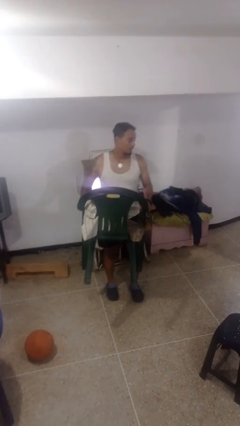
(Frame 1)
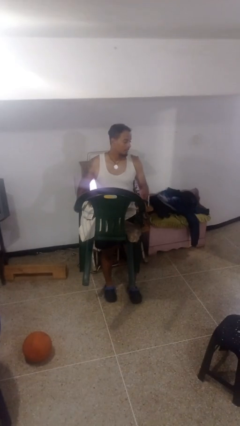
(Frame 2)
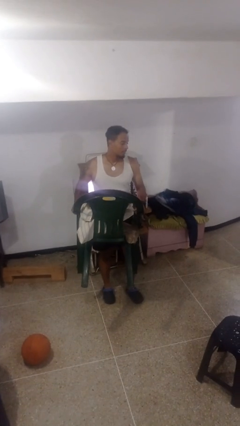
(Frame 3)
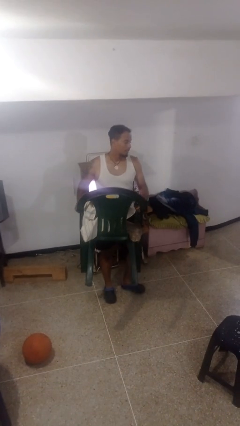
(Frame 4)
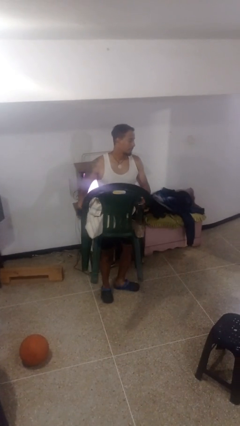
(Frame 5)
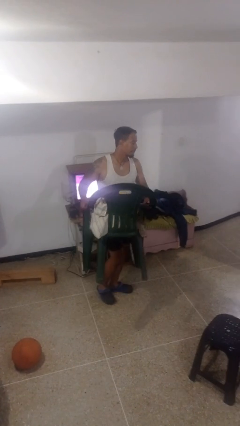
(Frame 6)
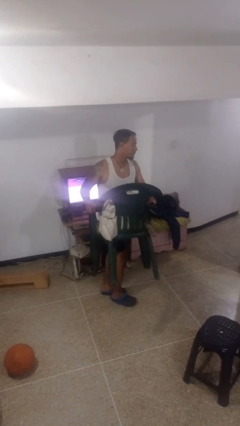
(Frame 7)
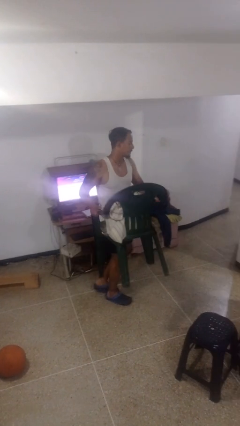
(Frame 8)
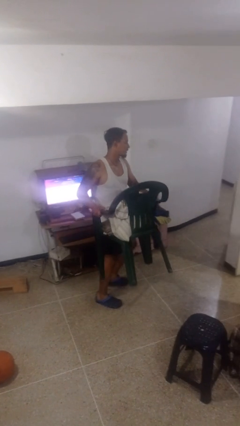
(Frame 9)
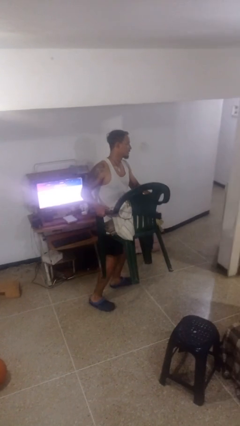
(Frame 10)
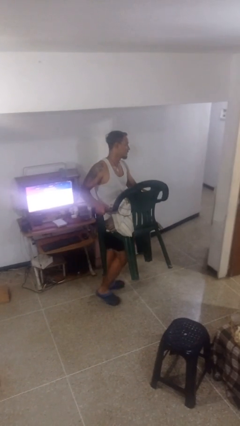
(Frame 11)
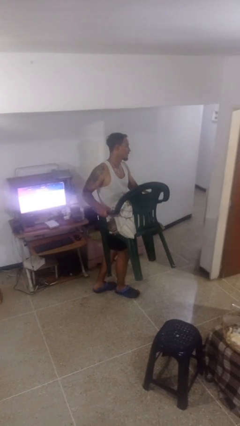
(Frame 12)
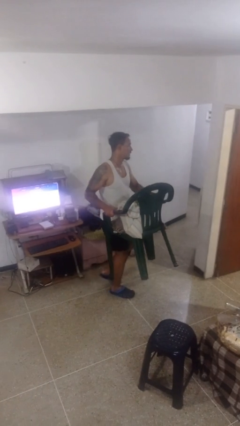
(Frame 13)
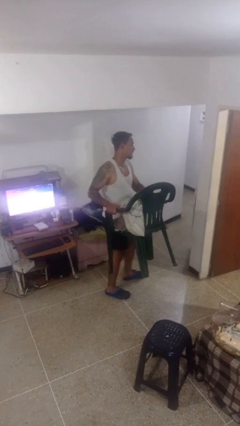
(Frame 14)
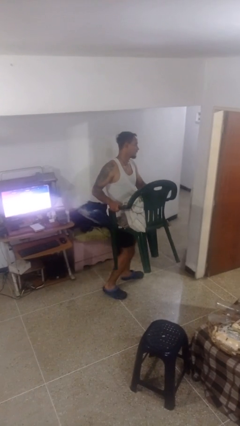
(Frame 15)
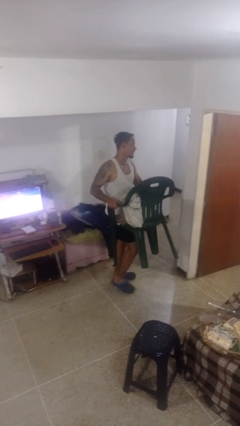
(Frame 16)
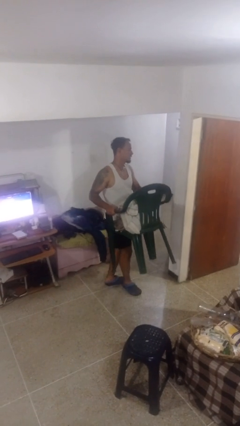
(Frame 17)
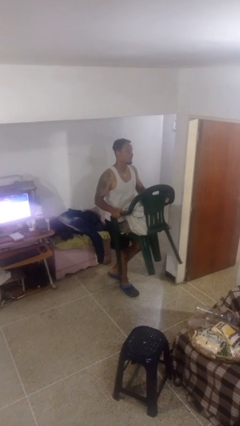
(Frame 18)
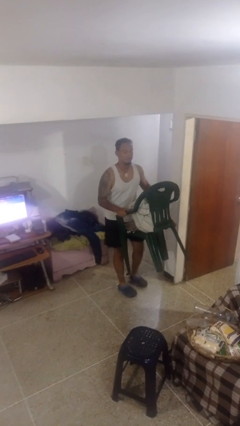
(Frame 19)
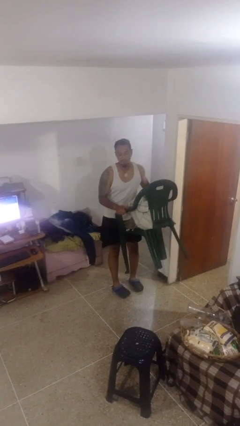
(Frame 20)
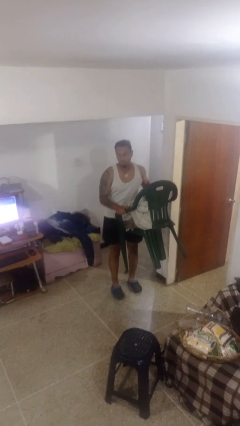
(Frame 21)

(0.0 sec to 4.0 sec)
person carries furniture

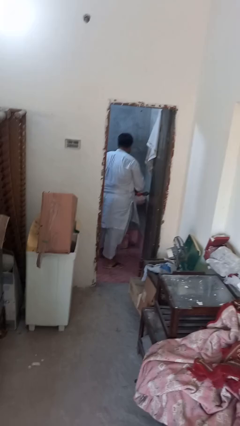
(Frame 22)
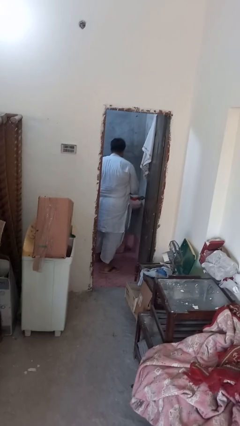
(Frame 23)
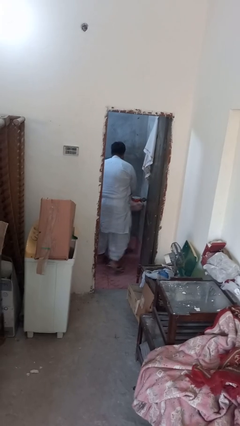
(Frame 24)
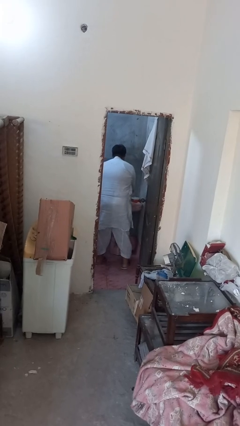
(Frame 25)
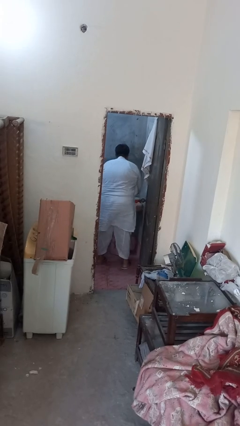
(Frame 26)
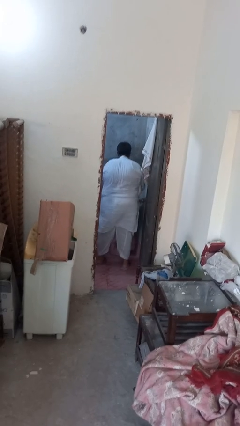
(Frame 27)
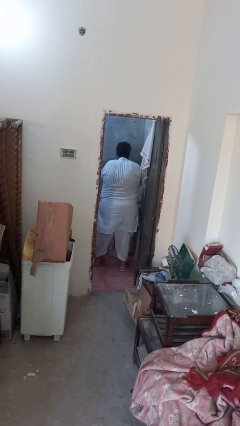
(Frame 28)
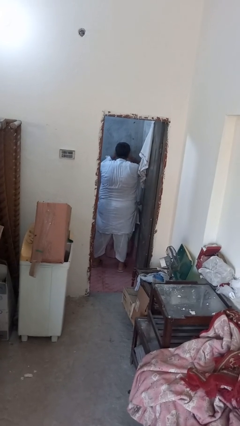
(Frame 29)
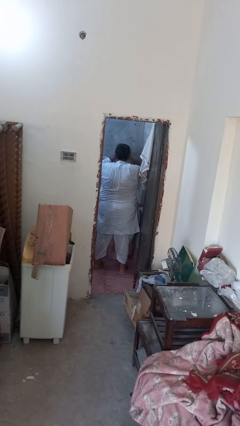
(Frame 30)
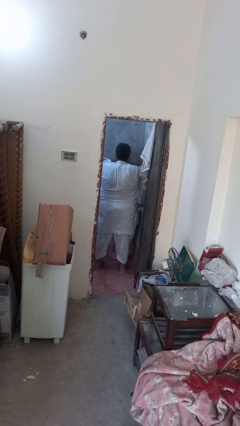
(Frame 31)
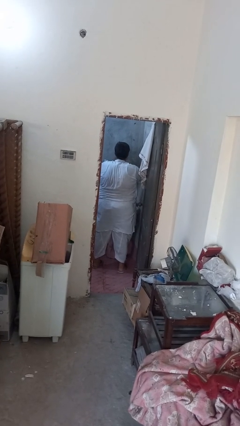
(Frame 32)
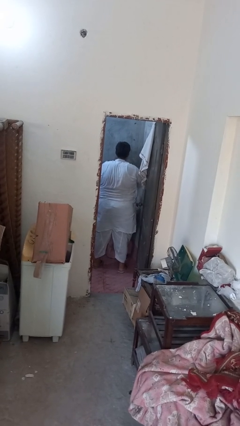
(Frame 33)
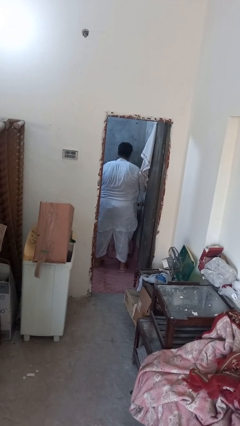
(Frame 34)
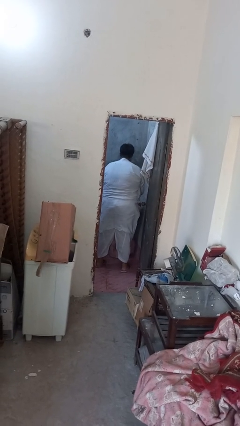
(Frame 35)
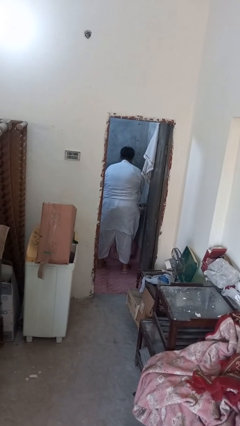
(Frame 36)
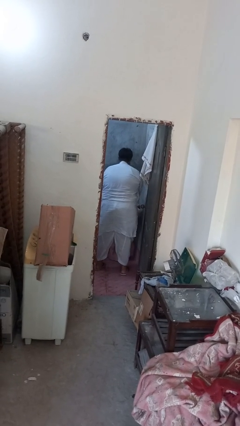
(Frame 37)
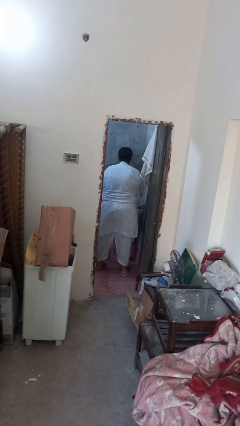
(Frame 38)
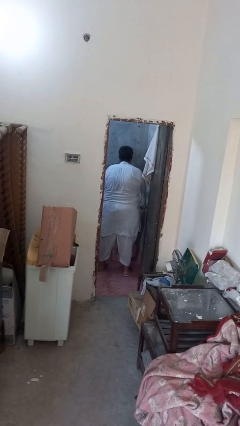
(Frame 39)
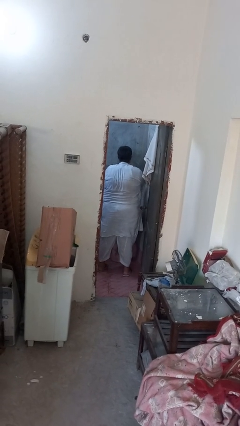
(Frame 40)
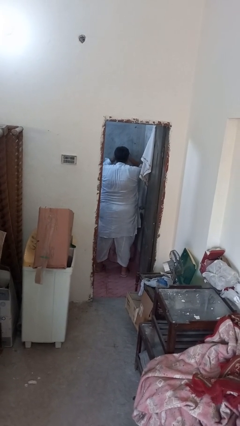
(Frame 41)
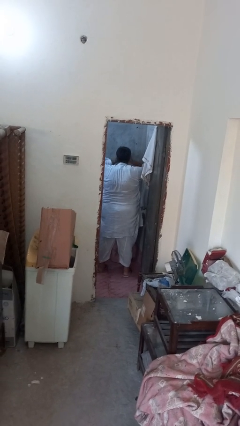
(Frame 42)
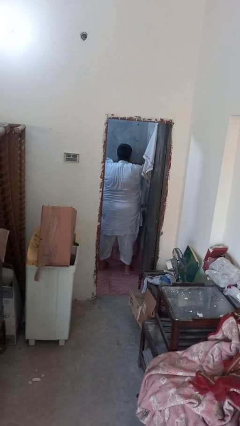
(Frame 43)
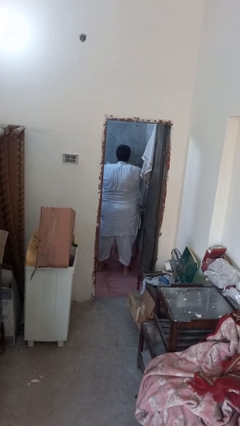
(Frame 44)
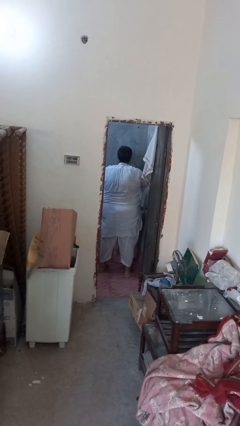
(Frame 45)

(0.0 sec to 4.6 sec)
person washes face

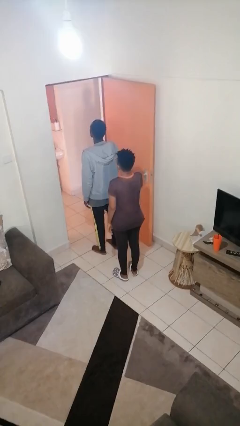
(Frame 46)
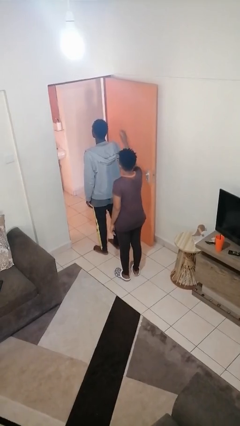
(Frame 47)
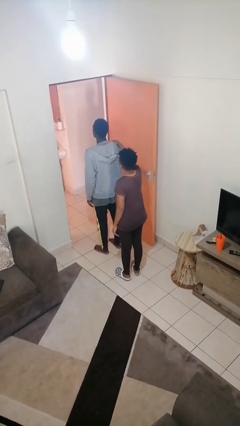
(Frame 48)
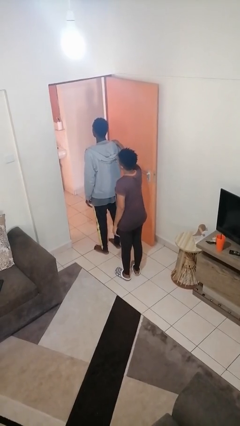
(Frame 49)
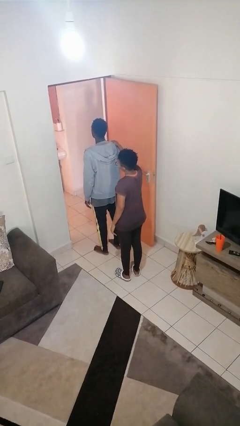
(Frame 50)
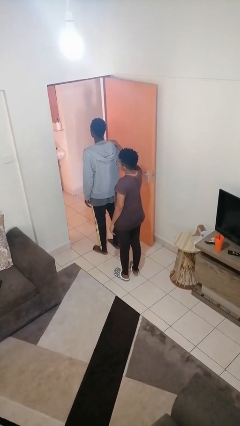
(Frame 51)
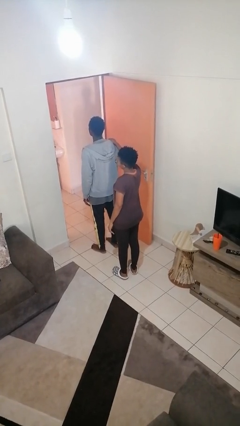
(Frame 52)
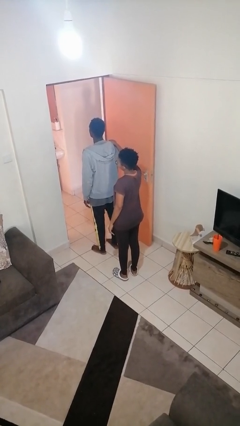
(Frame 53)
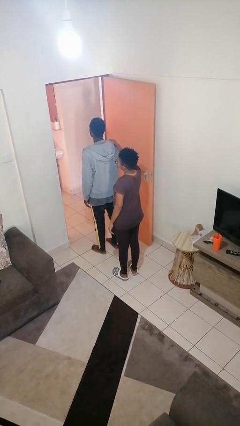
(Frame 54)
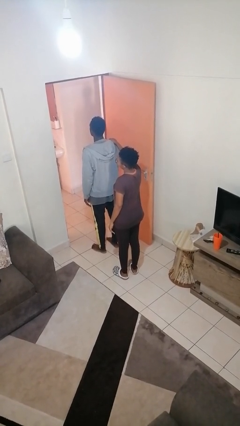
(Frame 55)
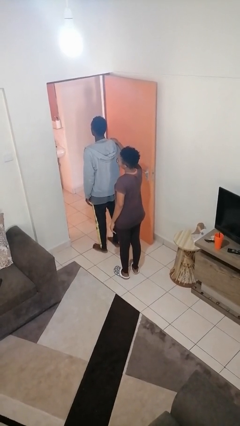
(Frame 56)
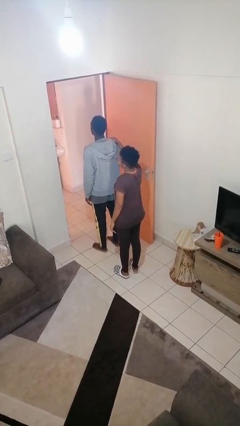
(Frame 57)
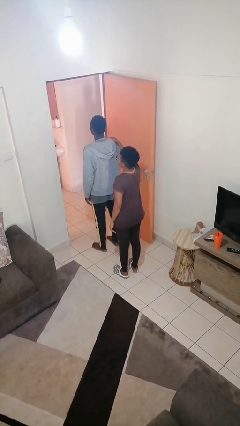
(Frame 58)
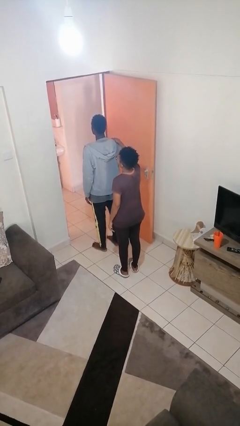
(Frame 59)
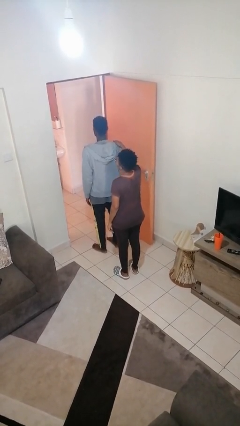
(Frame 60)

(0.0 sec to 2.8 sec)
person grabs person by shoulder

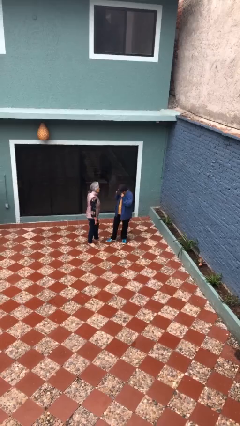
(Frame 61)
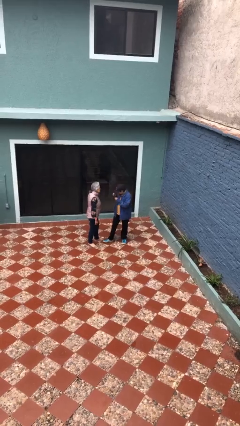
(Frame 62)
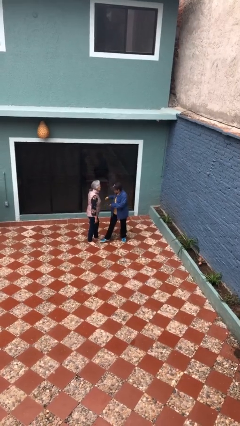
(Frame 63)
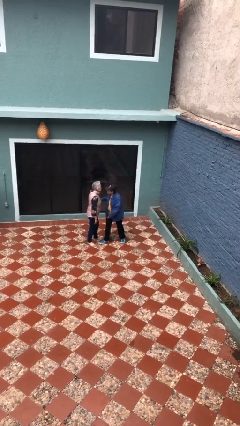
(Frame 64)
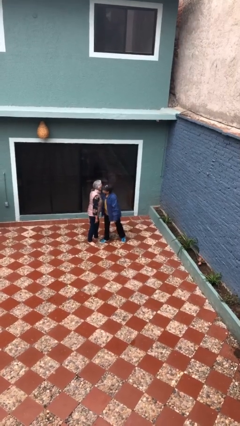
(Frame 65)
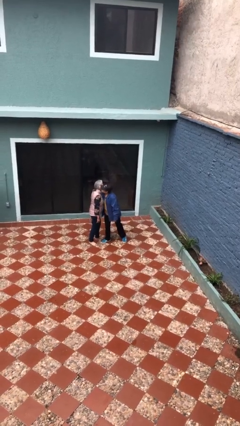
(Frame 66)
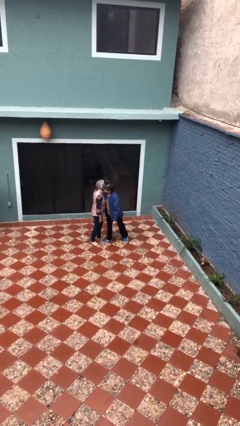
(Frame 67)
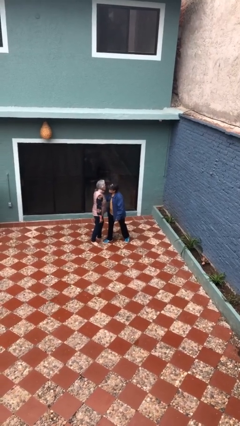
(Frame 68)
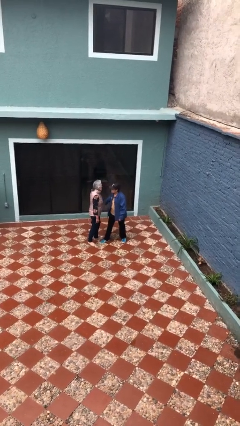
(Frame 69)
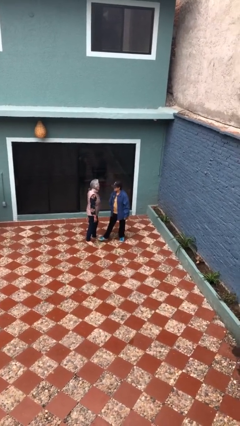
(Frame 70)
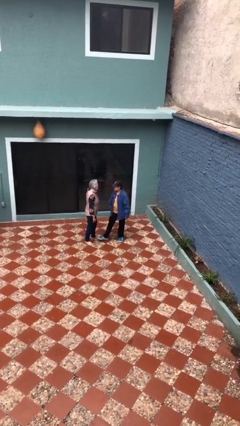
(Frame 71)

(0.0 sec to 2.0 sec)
person kisses cheek of person

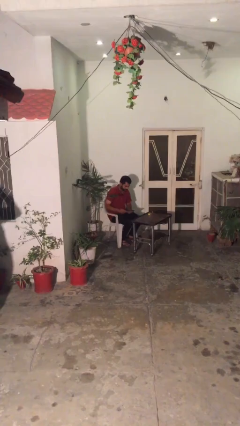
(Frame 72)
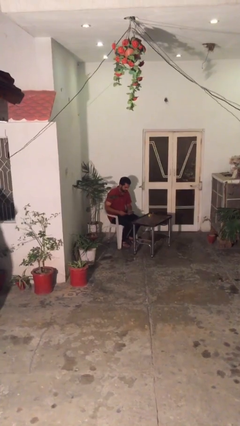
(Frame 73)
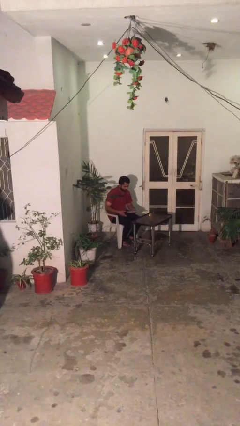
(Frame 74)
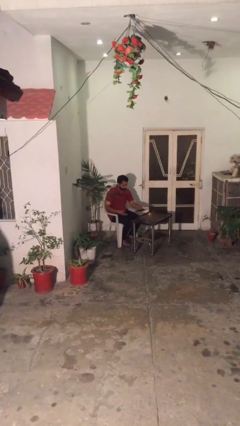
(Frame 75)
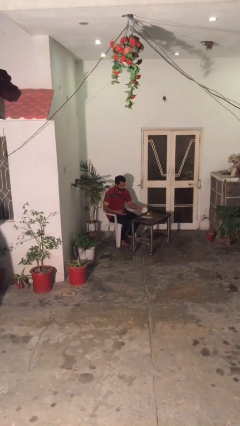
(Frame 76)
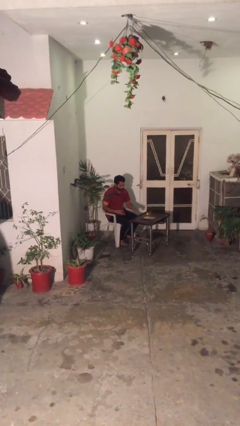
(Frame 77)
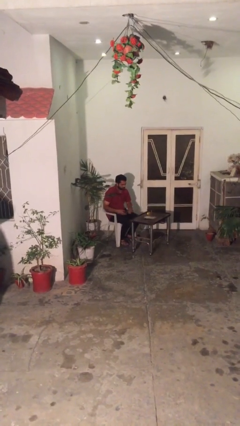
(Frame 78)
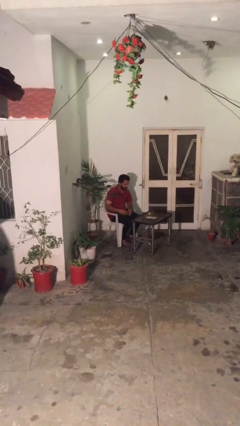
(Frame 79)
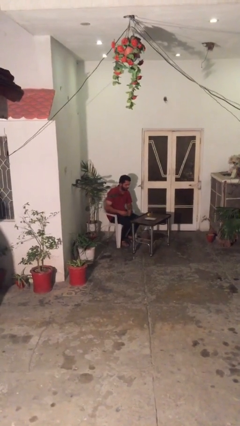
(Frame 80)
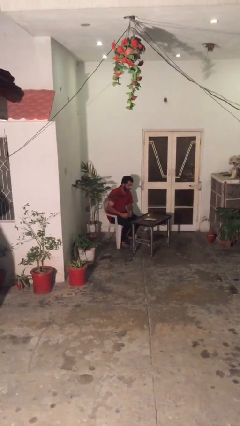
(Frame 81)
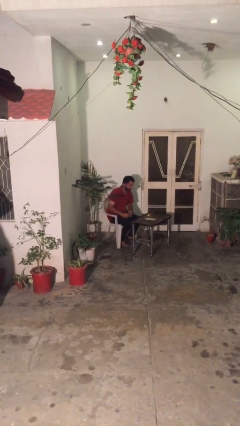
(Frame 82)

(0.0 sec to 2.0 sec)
person puts down object on table

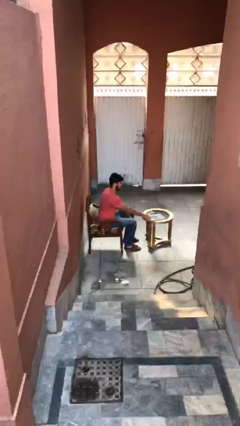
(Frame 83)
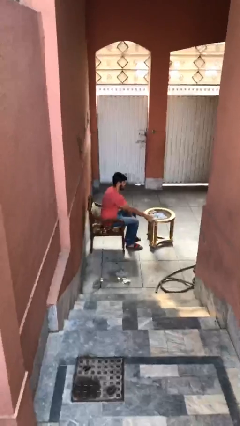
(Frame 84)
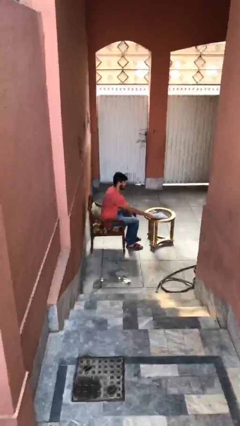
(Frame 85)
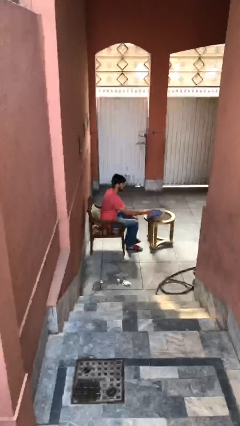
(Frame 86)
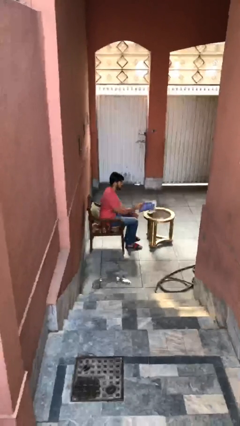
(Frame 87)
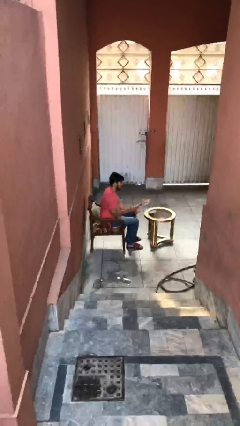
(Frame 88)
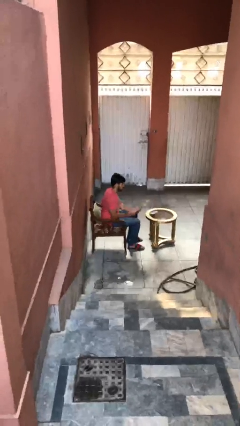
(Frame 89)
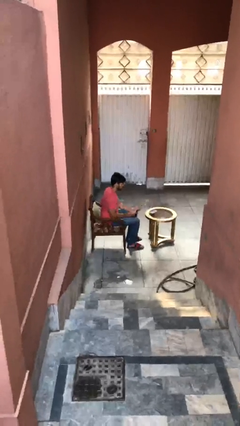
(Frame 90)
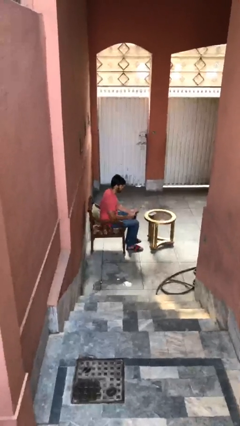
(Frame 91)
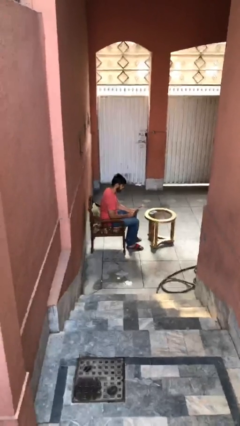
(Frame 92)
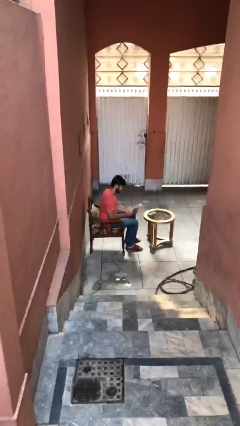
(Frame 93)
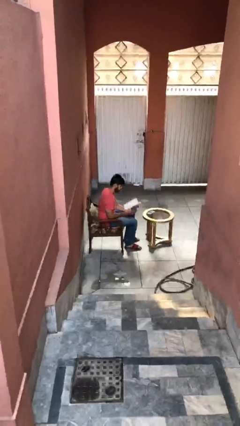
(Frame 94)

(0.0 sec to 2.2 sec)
person picks up object from table
